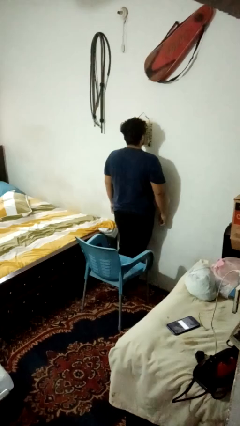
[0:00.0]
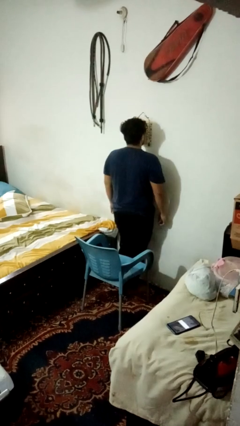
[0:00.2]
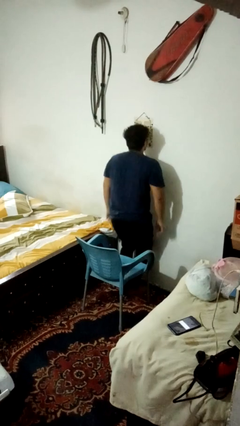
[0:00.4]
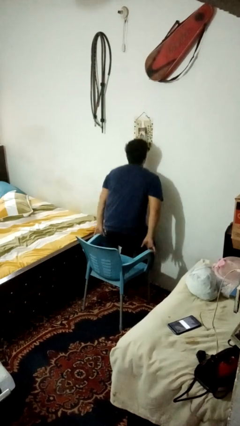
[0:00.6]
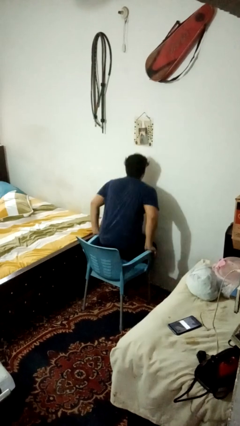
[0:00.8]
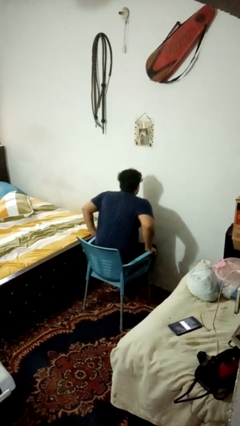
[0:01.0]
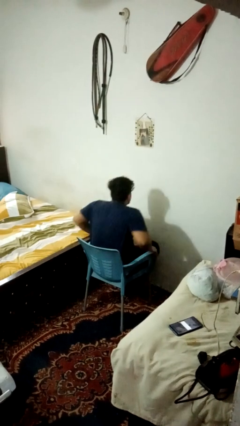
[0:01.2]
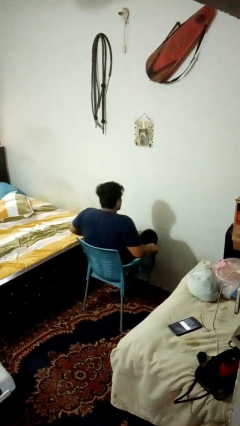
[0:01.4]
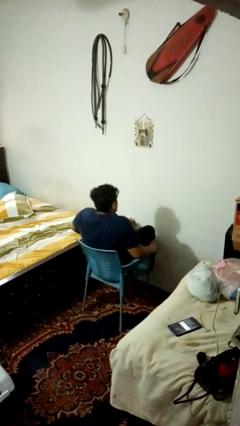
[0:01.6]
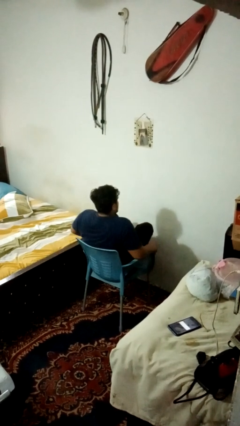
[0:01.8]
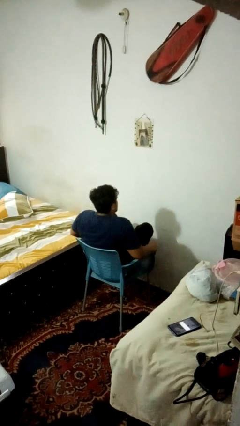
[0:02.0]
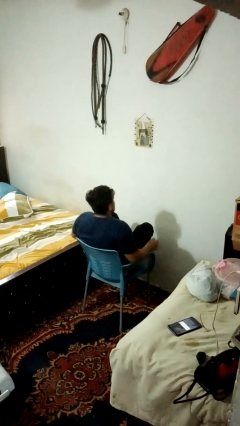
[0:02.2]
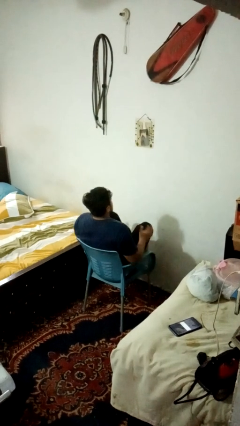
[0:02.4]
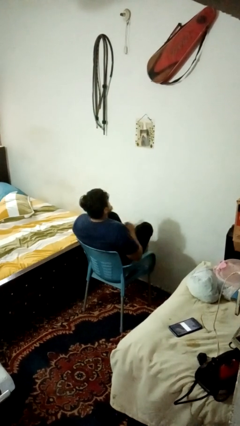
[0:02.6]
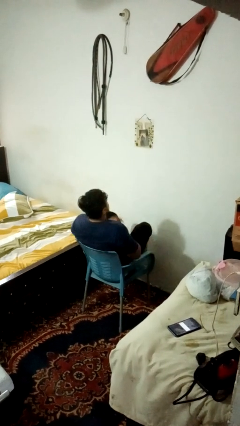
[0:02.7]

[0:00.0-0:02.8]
person crosses legs

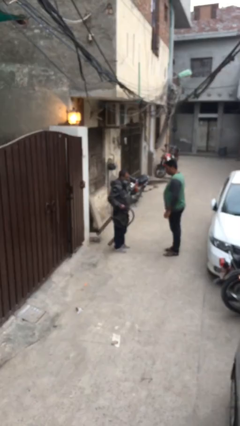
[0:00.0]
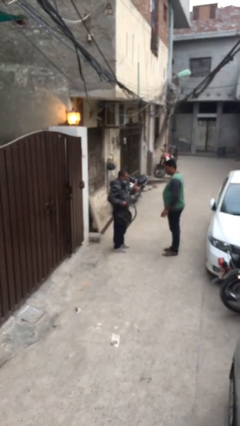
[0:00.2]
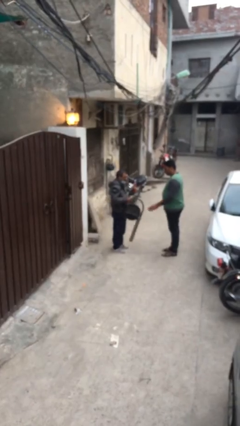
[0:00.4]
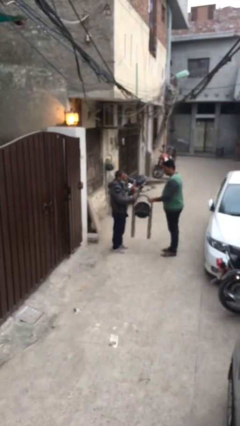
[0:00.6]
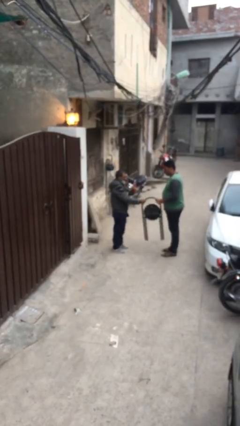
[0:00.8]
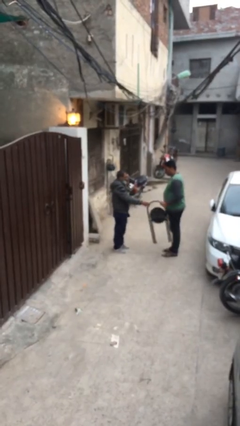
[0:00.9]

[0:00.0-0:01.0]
person transfers object to person

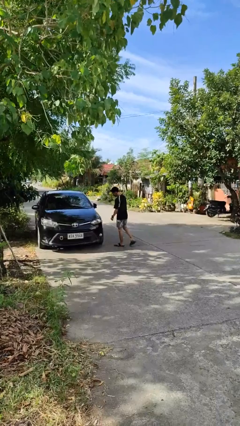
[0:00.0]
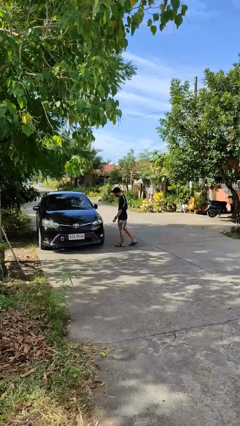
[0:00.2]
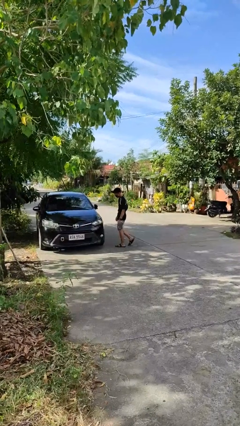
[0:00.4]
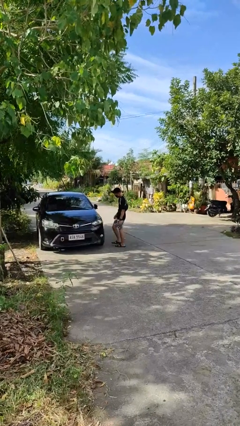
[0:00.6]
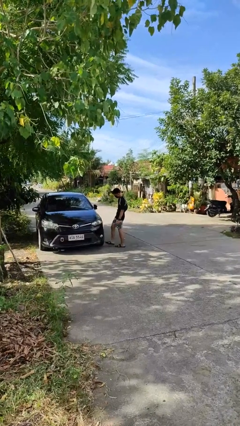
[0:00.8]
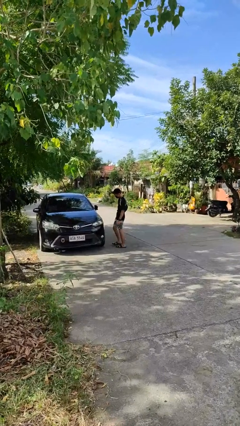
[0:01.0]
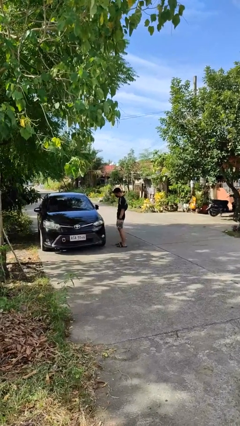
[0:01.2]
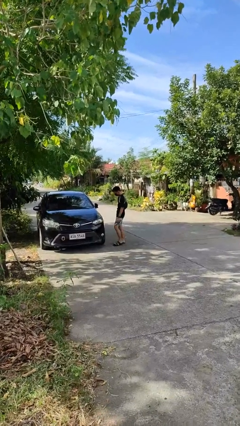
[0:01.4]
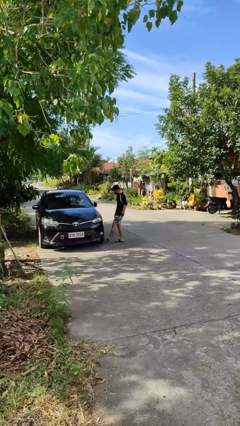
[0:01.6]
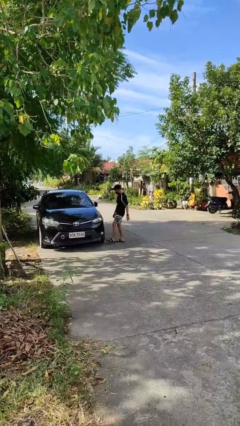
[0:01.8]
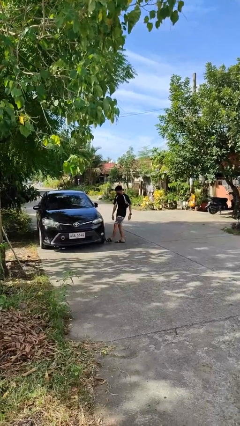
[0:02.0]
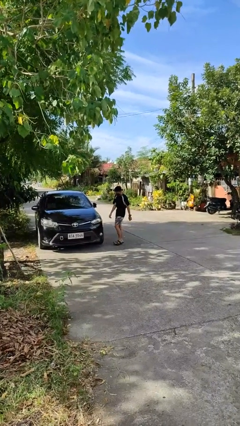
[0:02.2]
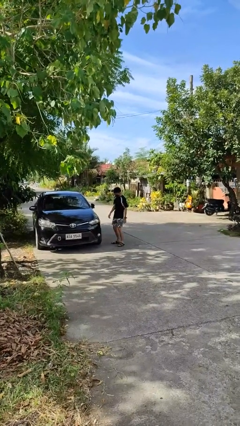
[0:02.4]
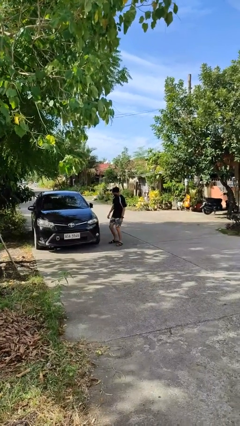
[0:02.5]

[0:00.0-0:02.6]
person kicks car tires

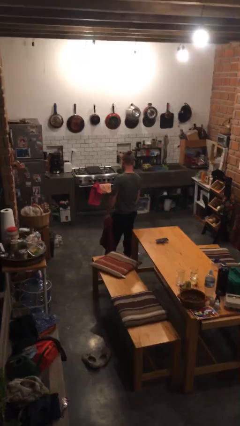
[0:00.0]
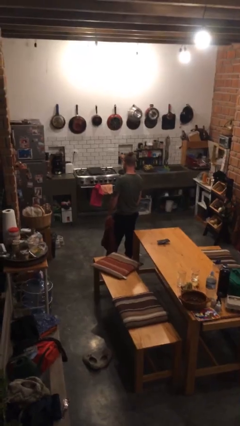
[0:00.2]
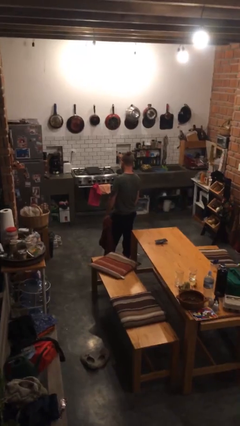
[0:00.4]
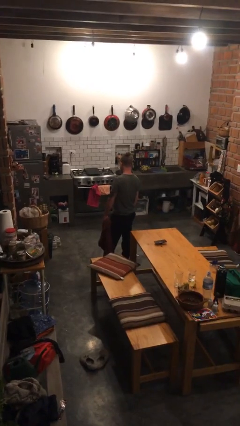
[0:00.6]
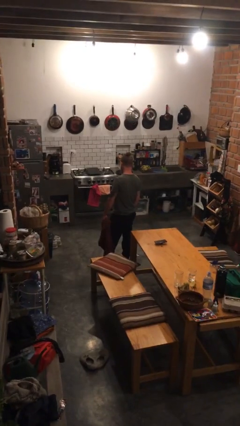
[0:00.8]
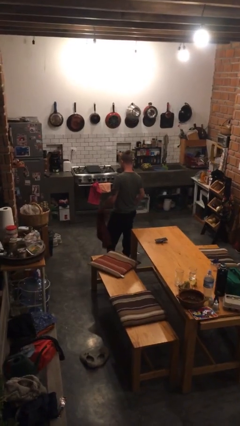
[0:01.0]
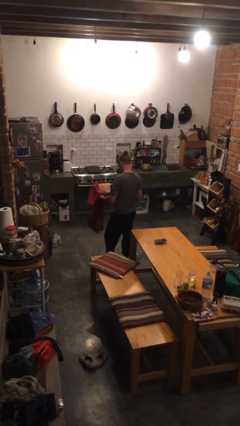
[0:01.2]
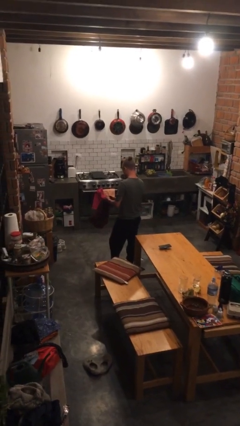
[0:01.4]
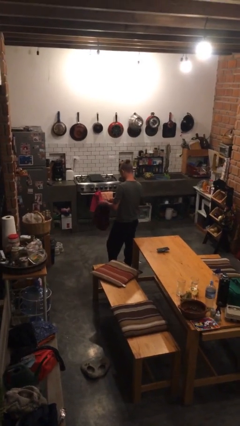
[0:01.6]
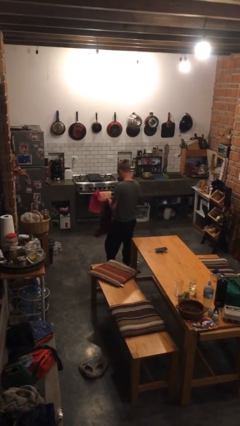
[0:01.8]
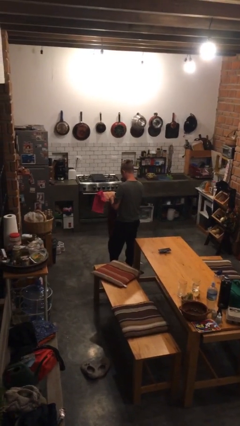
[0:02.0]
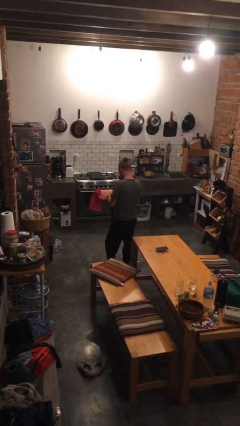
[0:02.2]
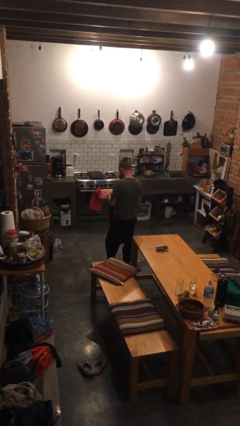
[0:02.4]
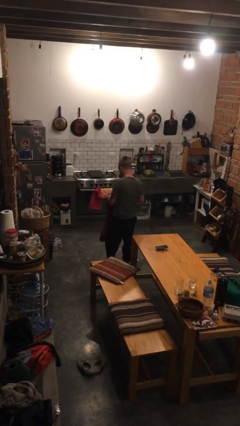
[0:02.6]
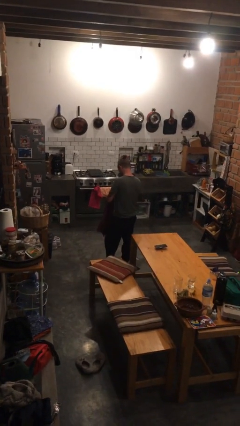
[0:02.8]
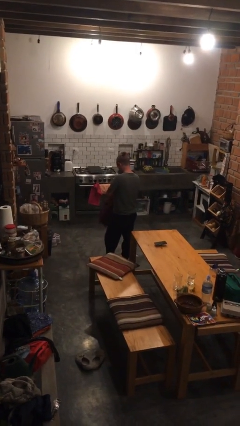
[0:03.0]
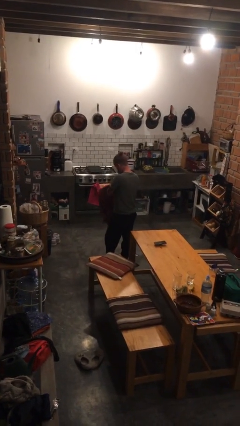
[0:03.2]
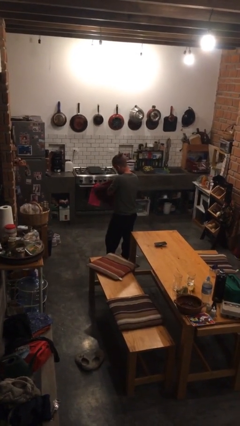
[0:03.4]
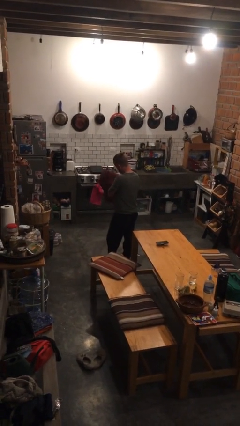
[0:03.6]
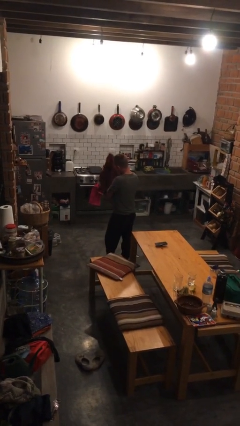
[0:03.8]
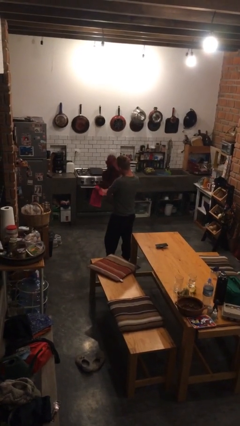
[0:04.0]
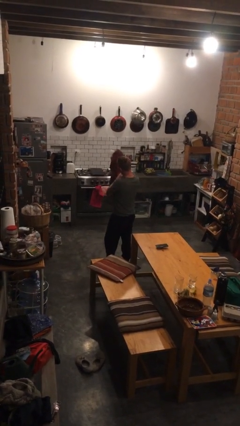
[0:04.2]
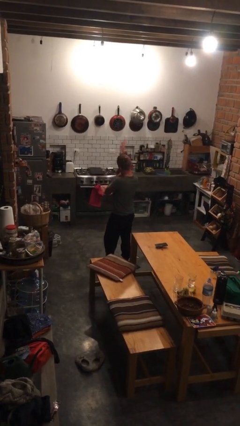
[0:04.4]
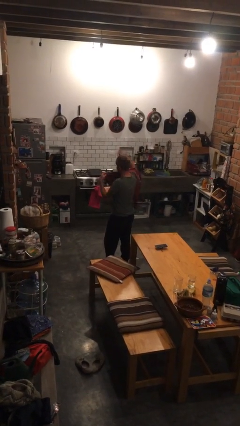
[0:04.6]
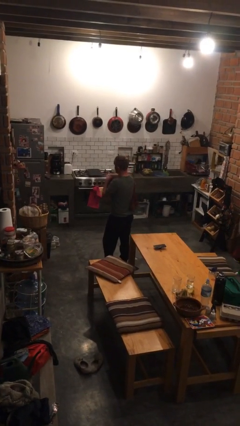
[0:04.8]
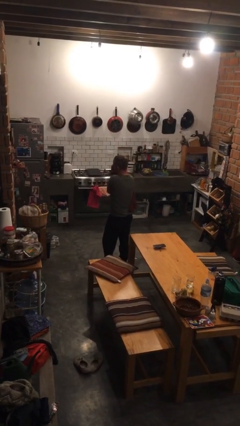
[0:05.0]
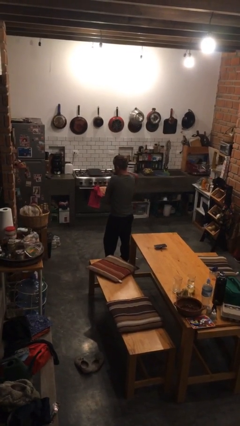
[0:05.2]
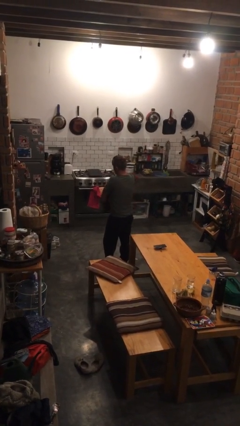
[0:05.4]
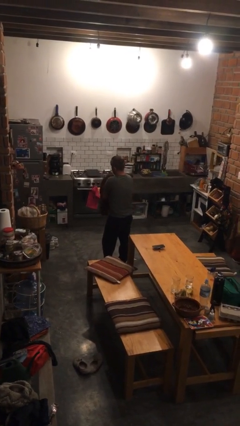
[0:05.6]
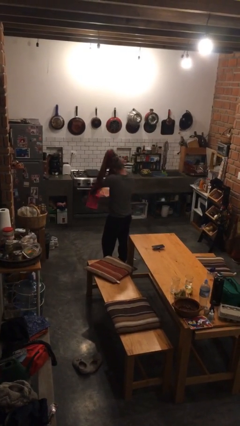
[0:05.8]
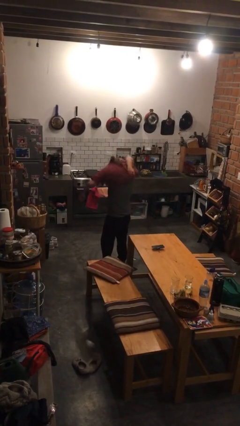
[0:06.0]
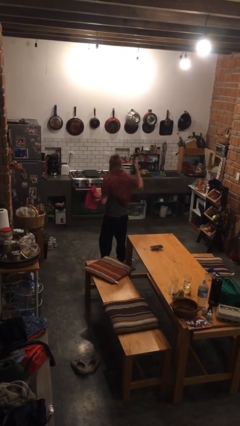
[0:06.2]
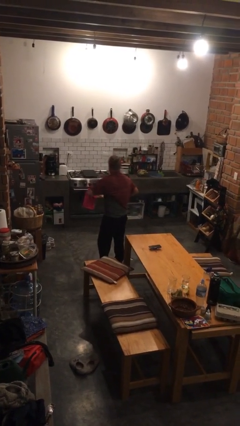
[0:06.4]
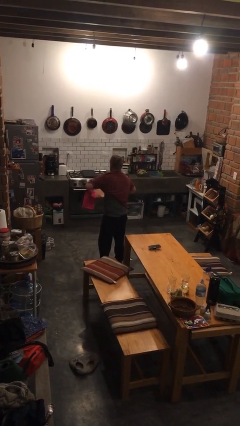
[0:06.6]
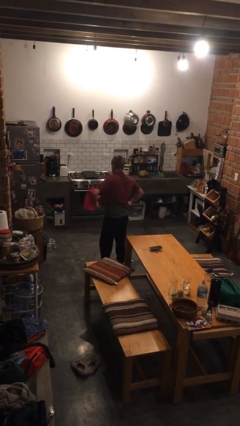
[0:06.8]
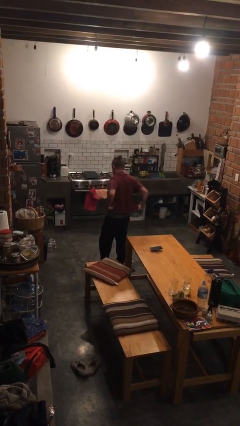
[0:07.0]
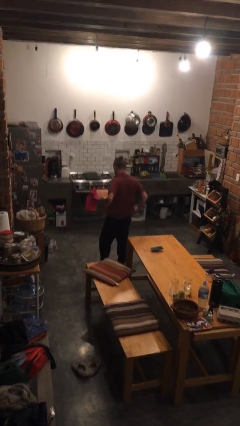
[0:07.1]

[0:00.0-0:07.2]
person puts on shirt

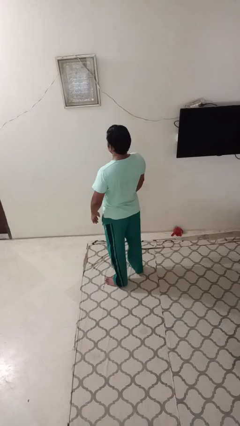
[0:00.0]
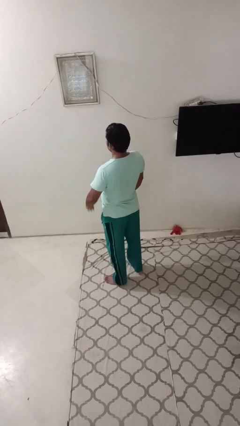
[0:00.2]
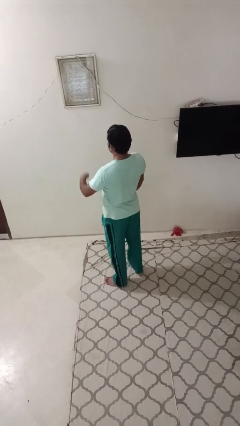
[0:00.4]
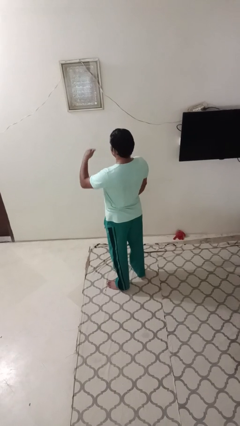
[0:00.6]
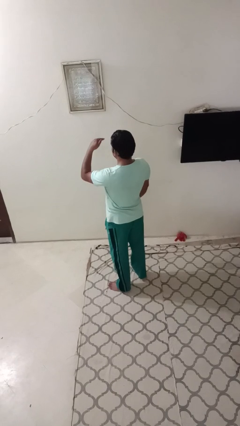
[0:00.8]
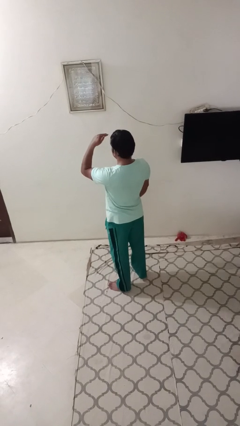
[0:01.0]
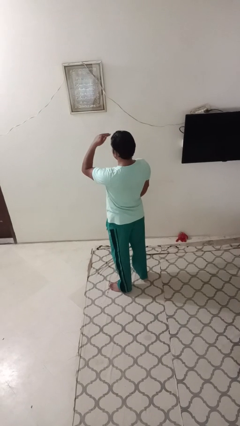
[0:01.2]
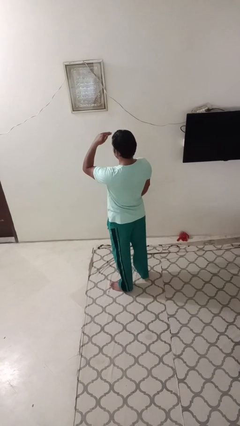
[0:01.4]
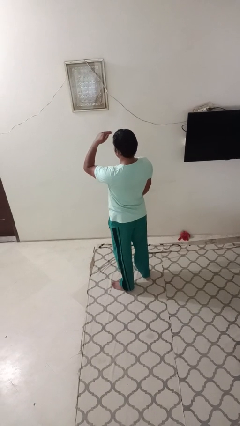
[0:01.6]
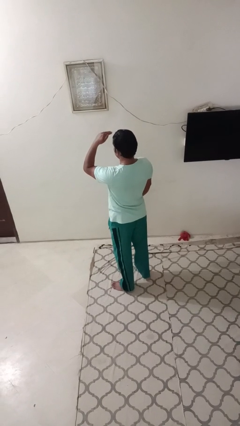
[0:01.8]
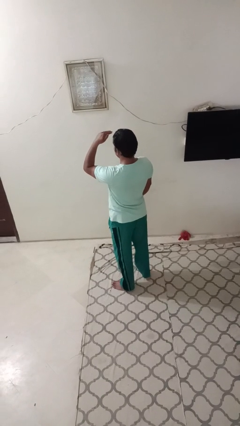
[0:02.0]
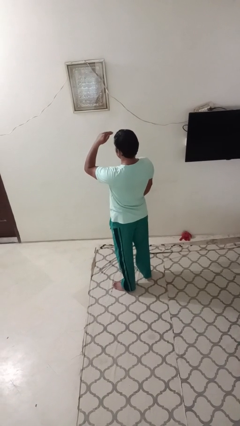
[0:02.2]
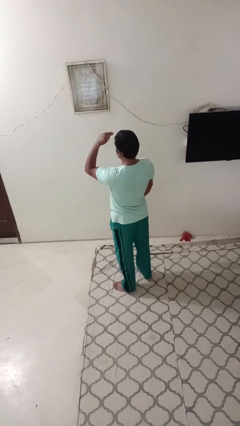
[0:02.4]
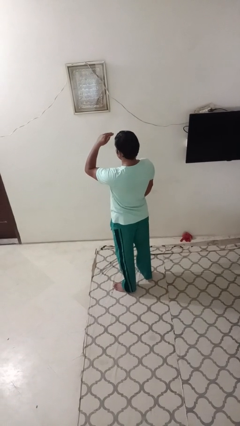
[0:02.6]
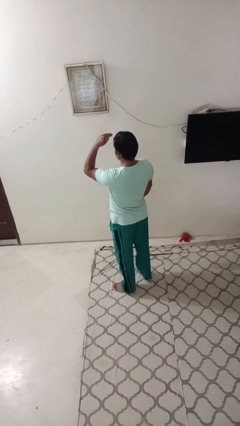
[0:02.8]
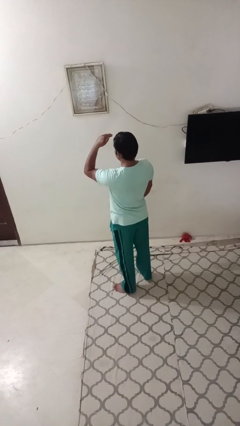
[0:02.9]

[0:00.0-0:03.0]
person gestures swipe up

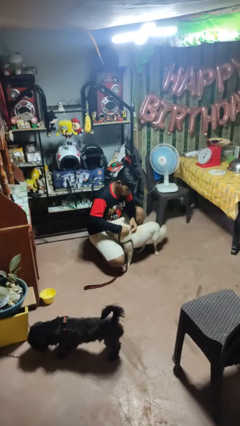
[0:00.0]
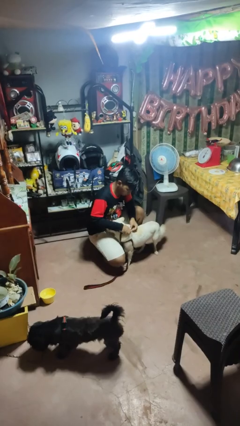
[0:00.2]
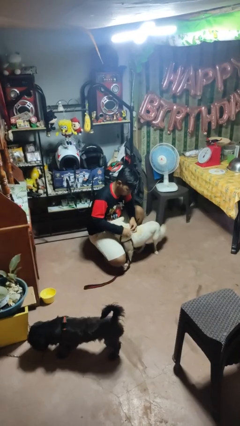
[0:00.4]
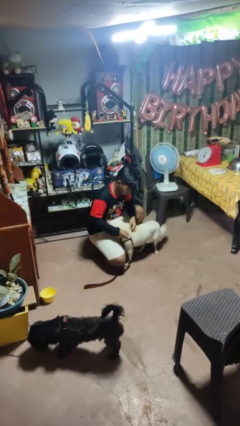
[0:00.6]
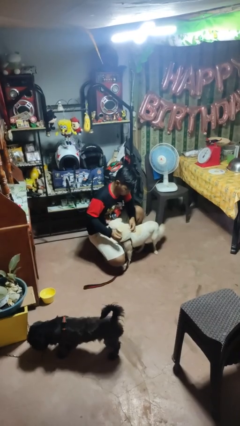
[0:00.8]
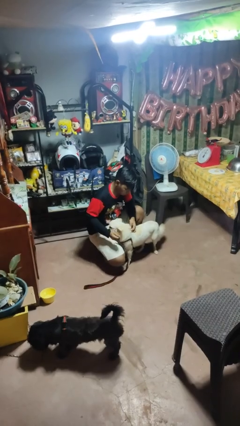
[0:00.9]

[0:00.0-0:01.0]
person unattaches leash from dog
